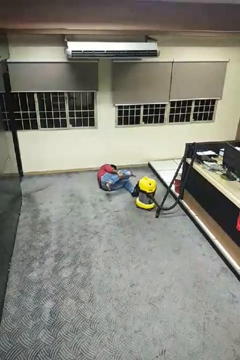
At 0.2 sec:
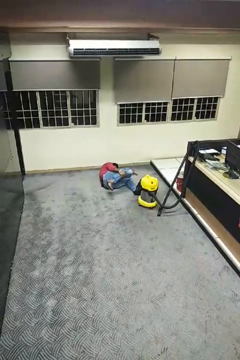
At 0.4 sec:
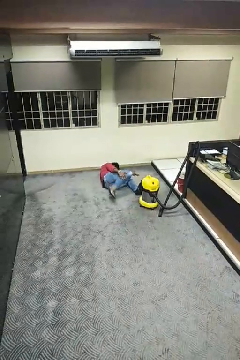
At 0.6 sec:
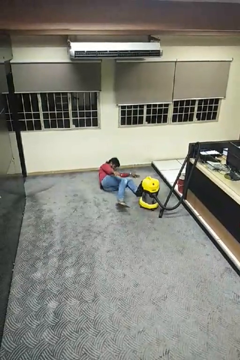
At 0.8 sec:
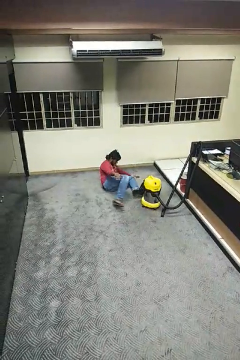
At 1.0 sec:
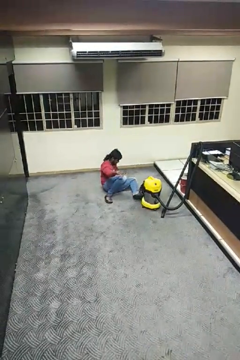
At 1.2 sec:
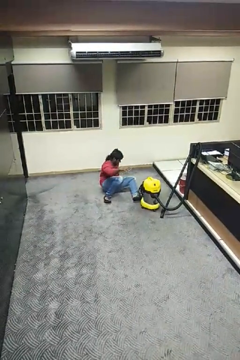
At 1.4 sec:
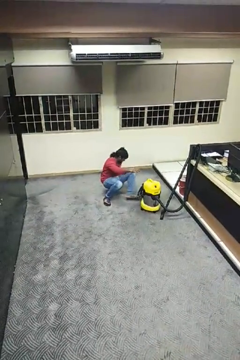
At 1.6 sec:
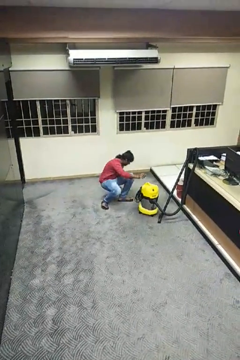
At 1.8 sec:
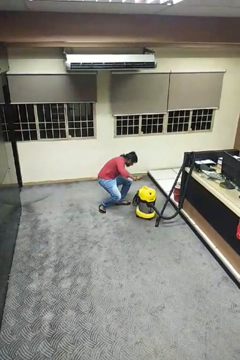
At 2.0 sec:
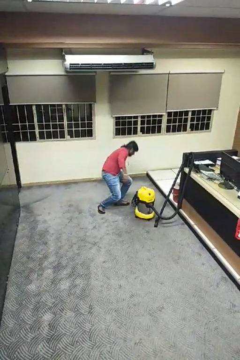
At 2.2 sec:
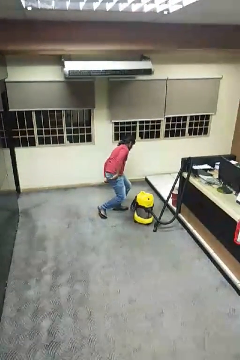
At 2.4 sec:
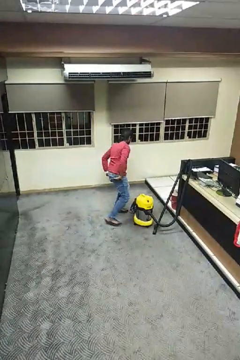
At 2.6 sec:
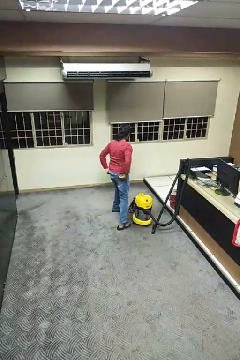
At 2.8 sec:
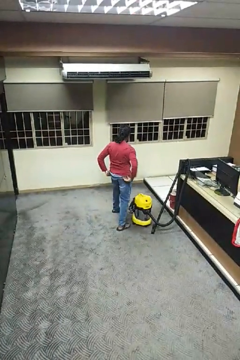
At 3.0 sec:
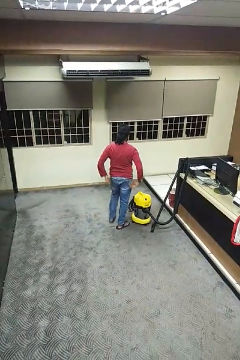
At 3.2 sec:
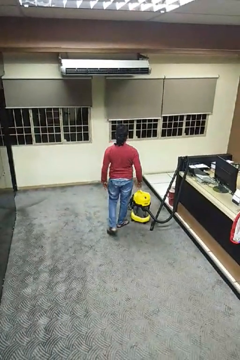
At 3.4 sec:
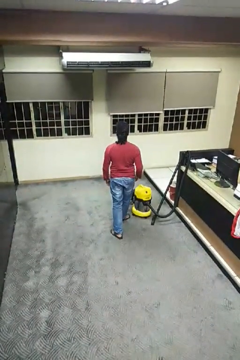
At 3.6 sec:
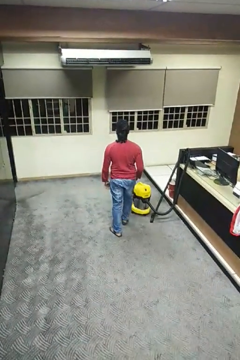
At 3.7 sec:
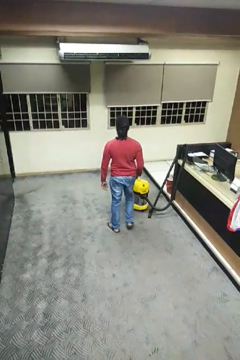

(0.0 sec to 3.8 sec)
person stands up from floor

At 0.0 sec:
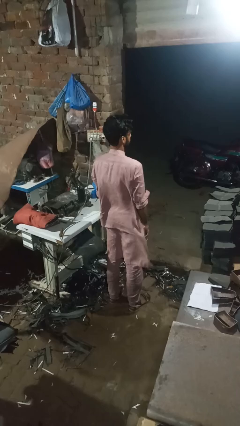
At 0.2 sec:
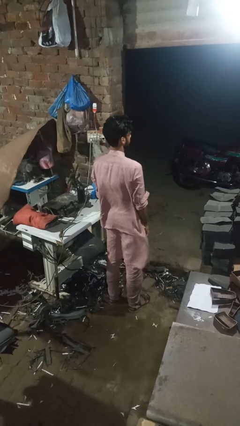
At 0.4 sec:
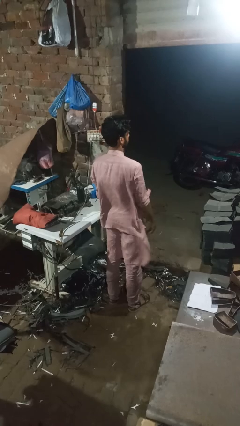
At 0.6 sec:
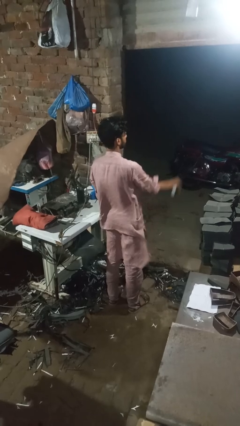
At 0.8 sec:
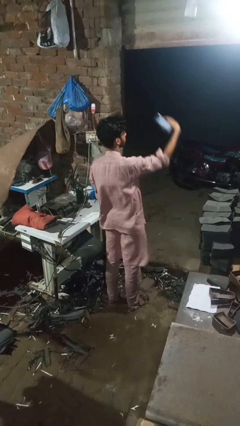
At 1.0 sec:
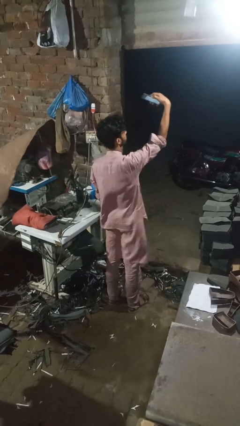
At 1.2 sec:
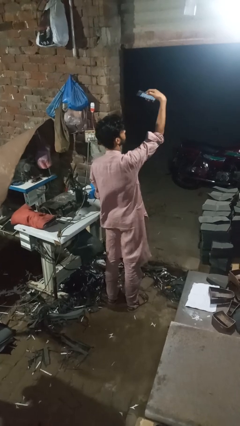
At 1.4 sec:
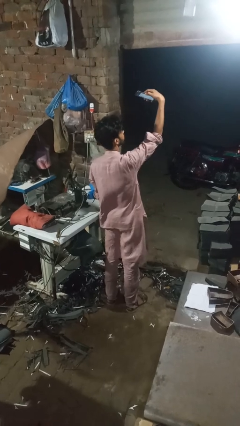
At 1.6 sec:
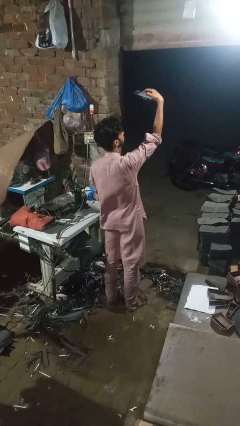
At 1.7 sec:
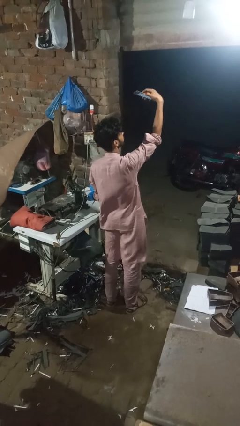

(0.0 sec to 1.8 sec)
person takes selfie

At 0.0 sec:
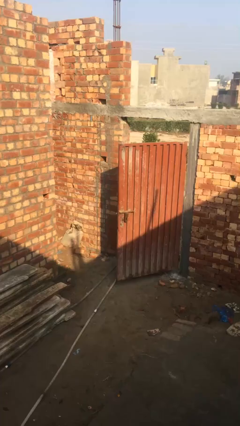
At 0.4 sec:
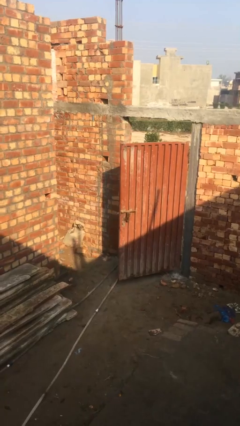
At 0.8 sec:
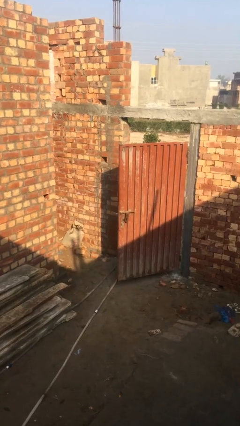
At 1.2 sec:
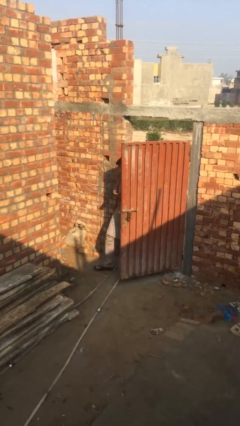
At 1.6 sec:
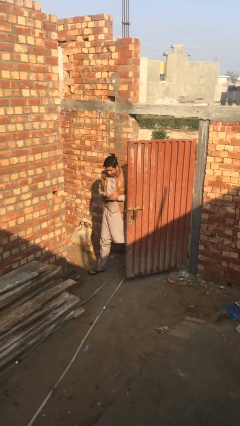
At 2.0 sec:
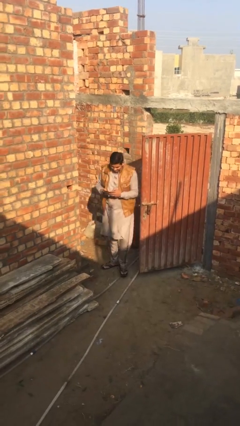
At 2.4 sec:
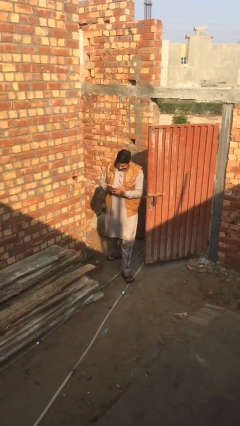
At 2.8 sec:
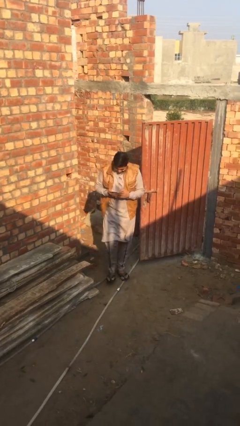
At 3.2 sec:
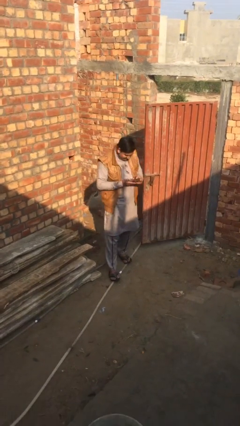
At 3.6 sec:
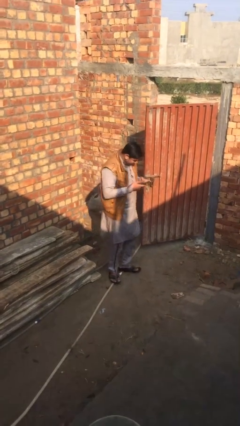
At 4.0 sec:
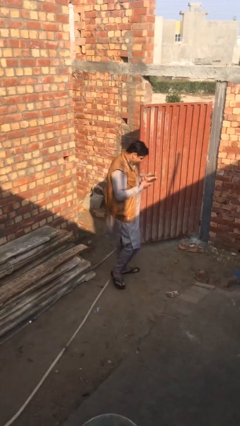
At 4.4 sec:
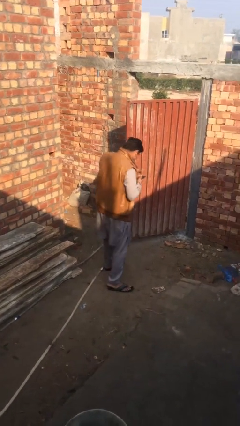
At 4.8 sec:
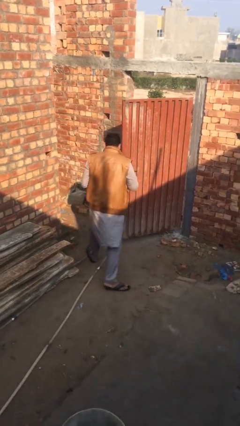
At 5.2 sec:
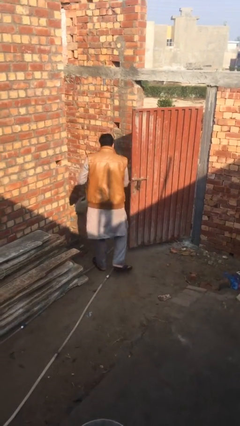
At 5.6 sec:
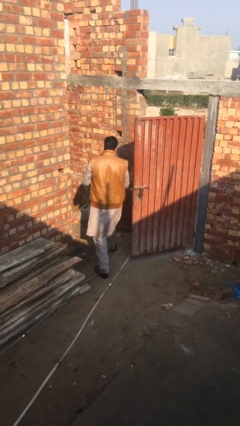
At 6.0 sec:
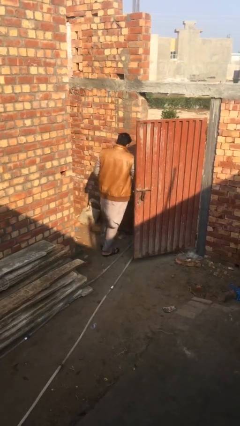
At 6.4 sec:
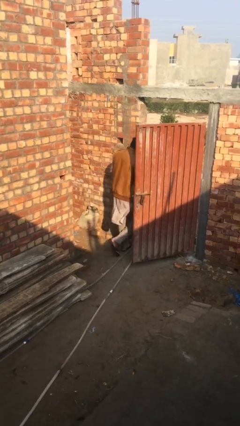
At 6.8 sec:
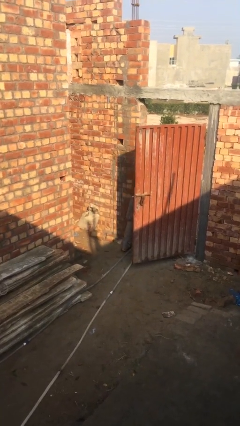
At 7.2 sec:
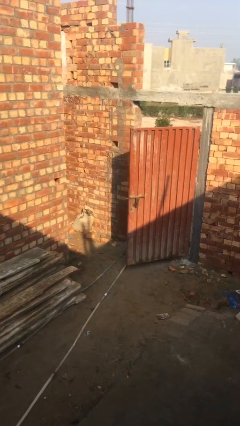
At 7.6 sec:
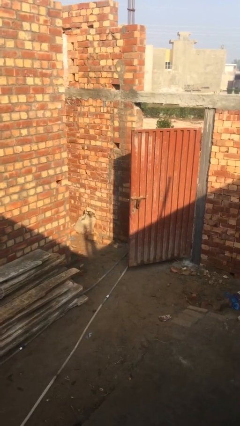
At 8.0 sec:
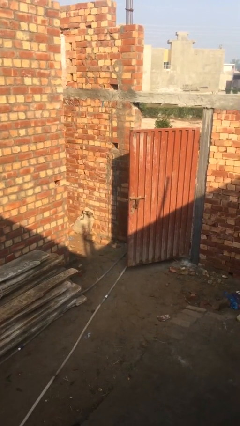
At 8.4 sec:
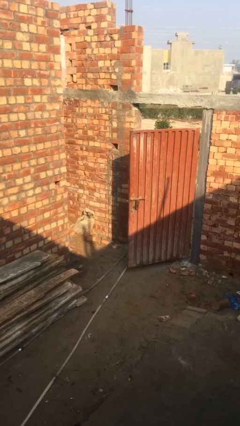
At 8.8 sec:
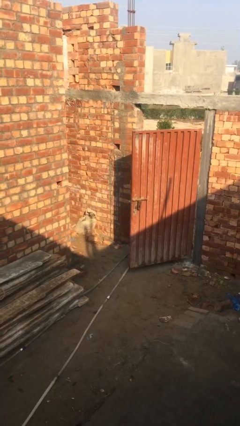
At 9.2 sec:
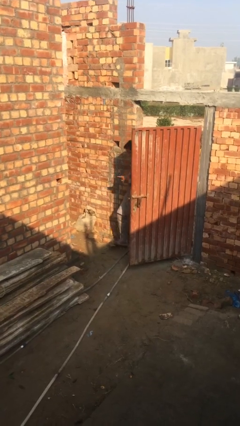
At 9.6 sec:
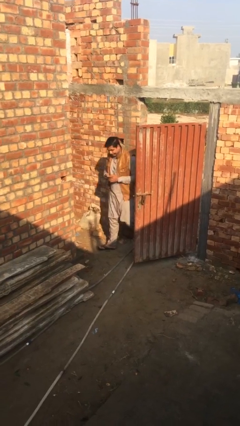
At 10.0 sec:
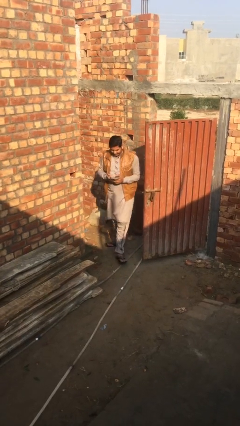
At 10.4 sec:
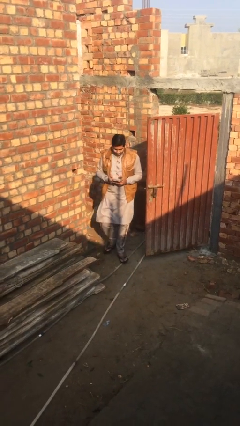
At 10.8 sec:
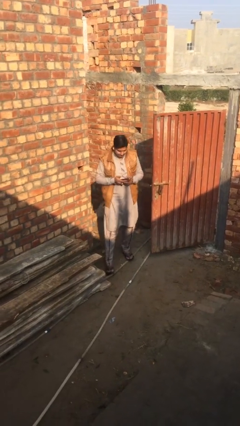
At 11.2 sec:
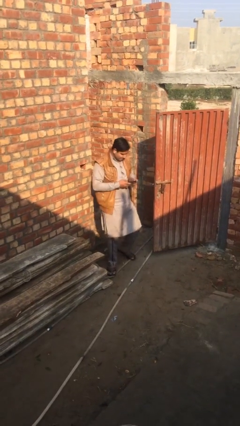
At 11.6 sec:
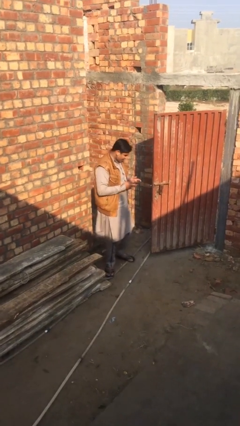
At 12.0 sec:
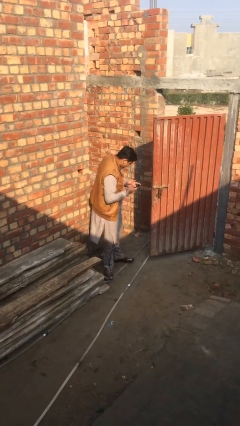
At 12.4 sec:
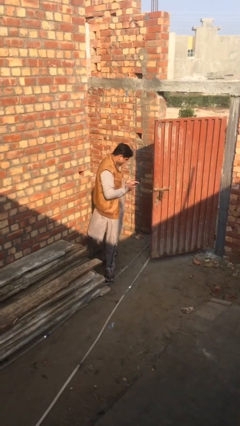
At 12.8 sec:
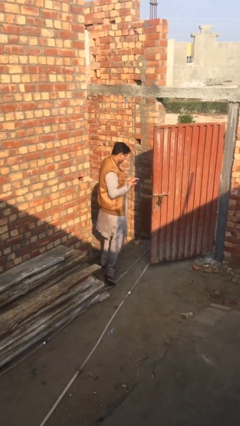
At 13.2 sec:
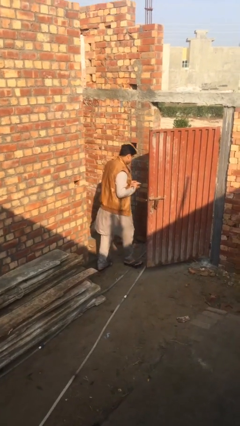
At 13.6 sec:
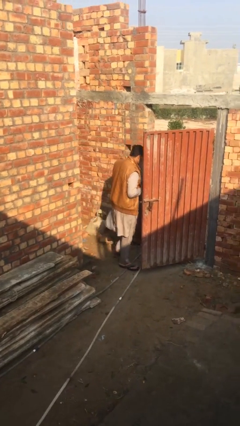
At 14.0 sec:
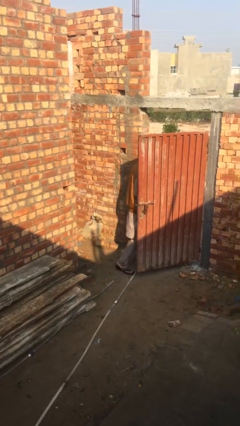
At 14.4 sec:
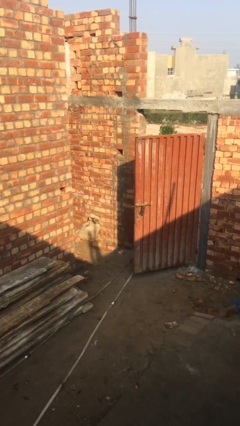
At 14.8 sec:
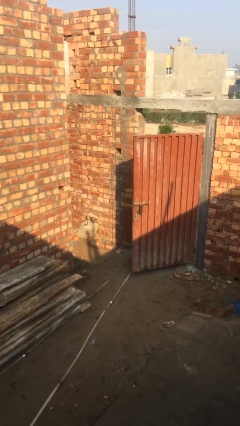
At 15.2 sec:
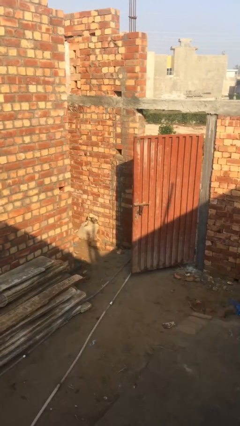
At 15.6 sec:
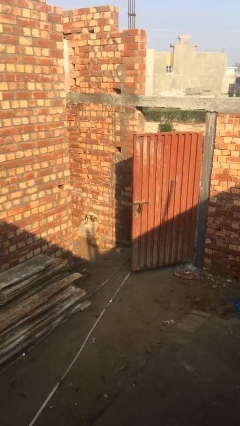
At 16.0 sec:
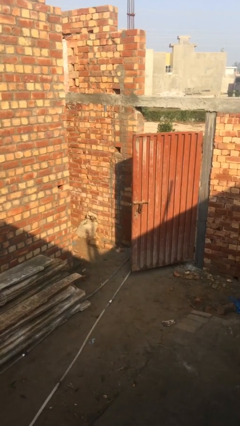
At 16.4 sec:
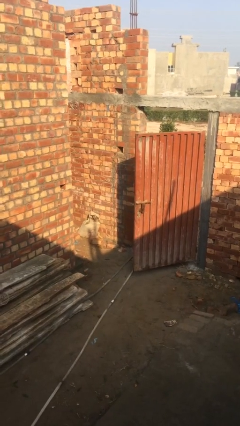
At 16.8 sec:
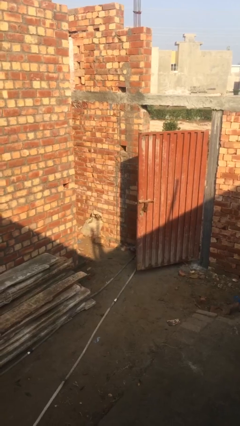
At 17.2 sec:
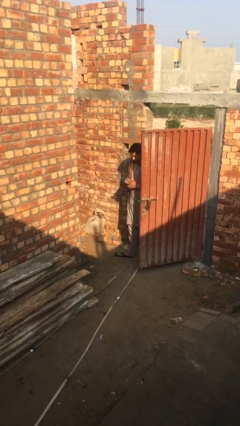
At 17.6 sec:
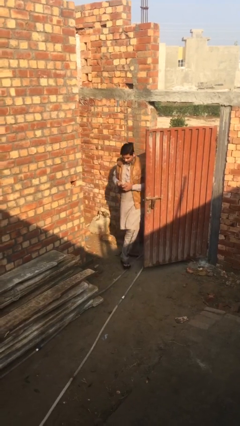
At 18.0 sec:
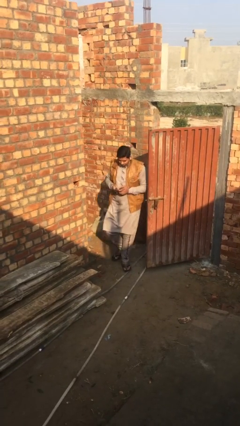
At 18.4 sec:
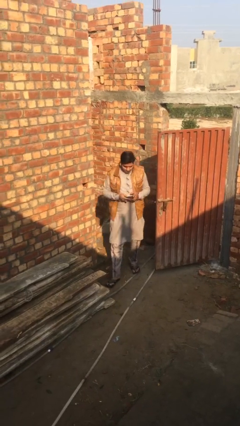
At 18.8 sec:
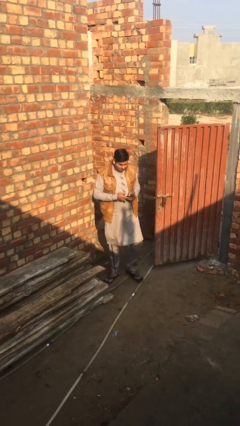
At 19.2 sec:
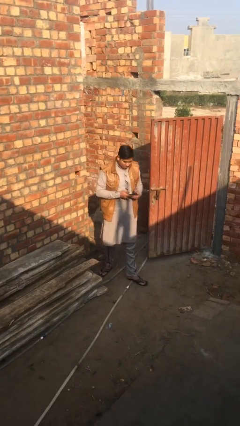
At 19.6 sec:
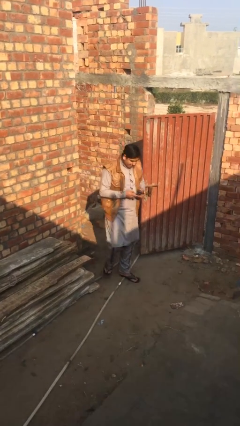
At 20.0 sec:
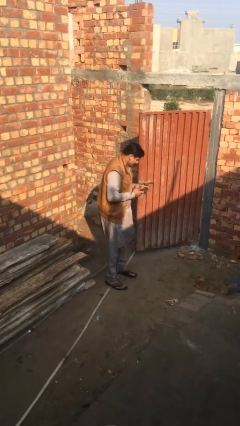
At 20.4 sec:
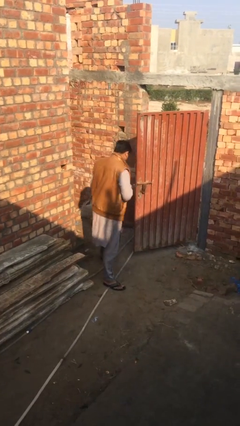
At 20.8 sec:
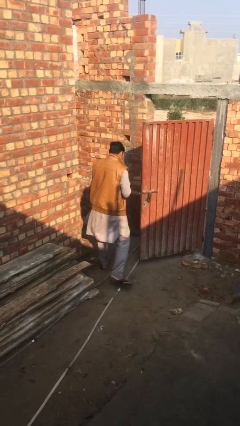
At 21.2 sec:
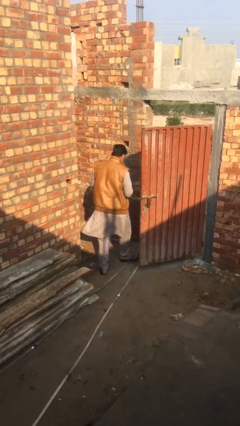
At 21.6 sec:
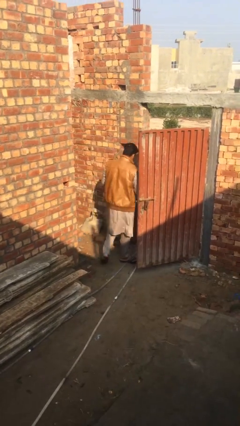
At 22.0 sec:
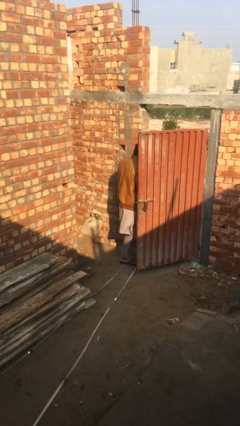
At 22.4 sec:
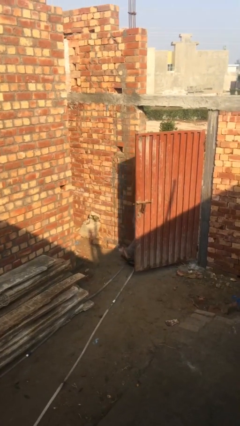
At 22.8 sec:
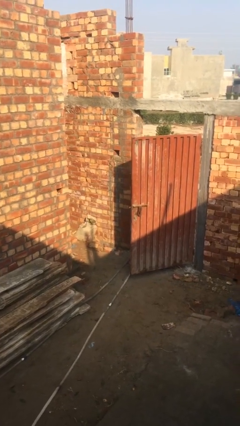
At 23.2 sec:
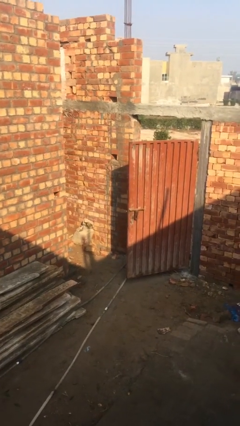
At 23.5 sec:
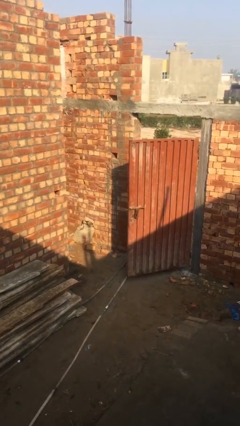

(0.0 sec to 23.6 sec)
person texts on phone

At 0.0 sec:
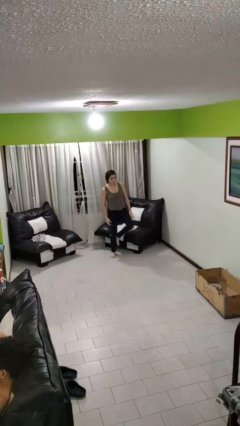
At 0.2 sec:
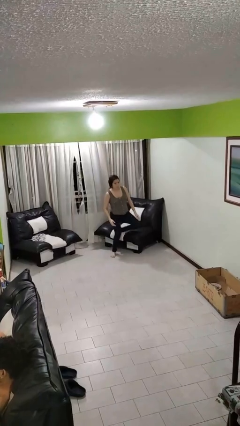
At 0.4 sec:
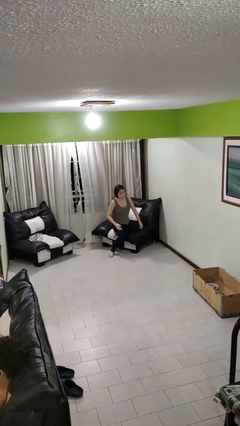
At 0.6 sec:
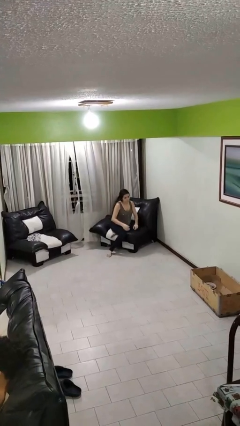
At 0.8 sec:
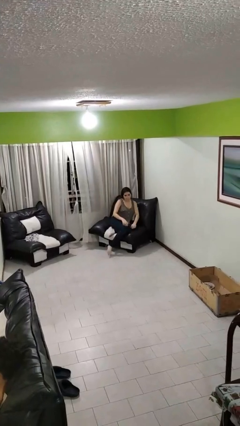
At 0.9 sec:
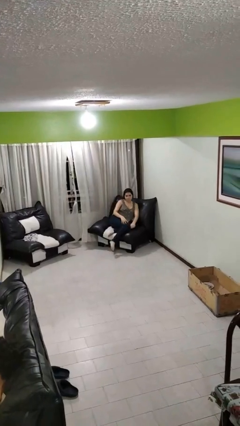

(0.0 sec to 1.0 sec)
person lies down on couch
